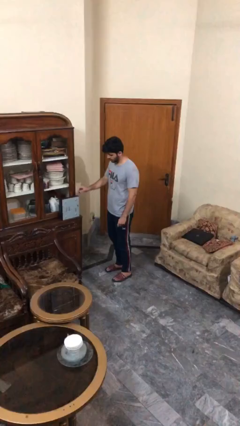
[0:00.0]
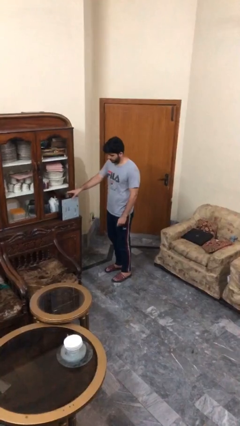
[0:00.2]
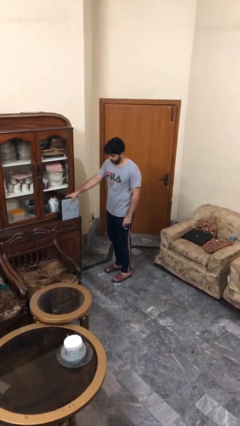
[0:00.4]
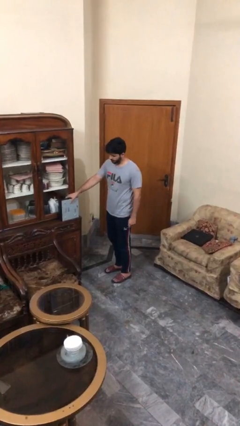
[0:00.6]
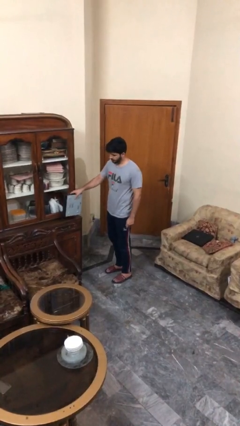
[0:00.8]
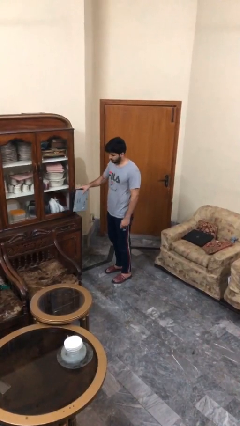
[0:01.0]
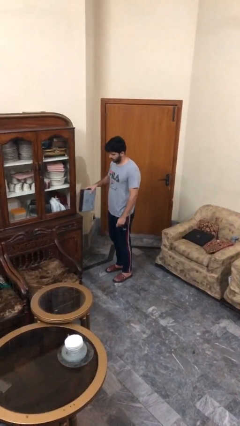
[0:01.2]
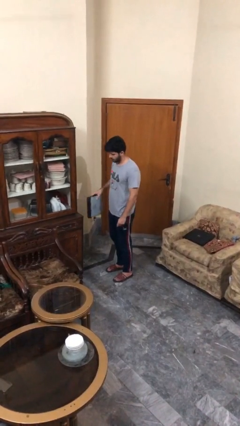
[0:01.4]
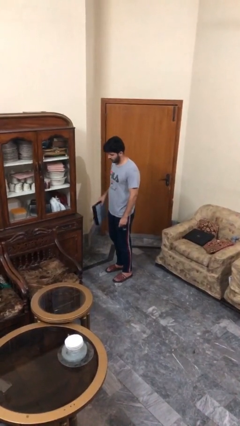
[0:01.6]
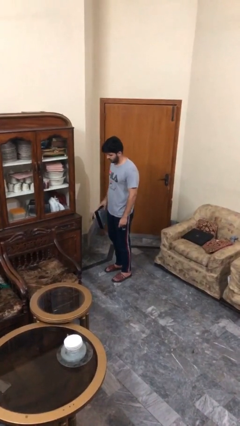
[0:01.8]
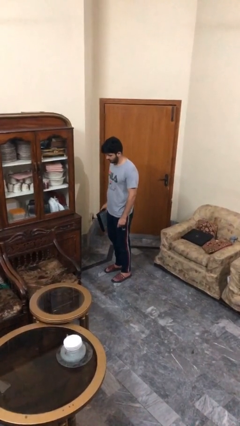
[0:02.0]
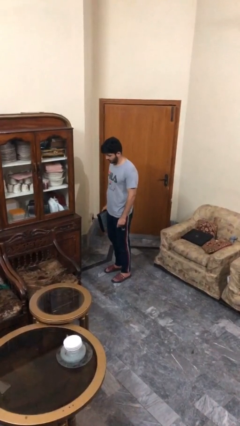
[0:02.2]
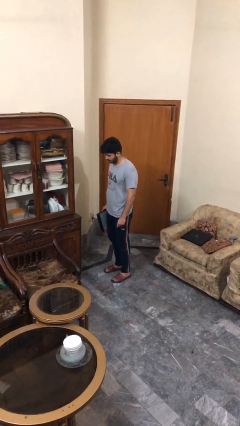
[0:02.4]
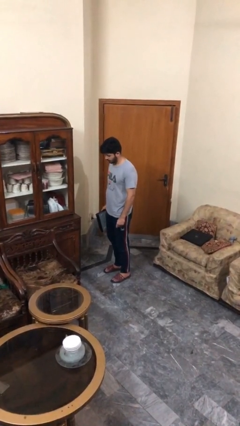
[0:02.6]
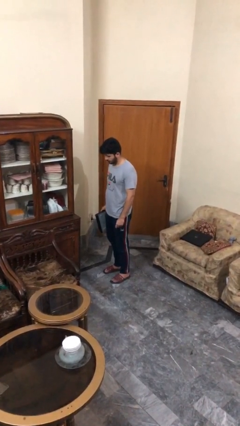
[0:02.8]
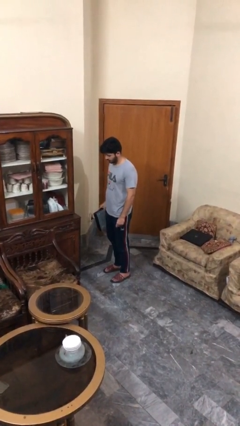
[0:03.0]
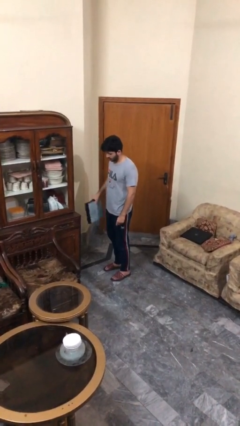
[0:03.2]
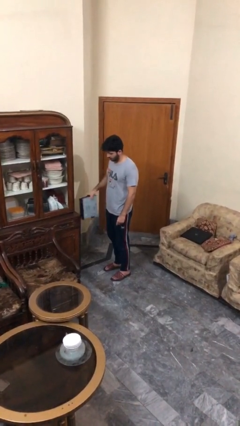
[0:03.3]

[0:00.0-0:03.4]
person picks up object from countertop

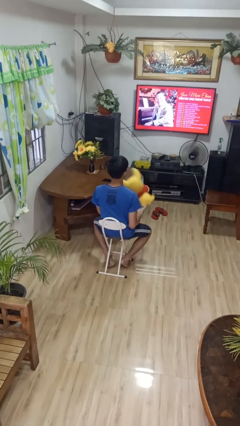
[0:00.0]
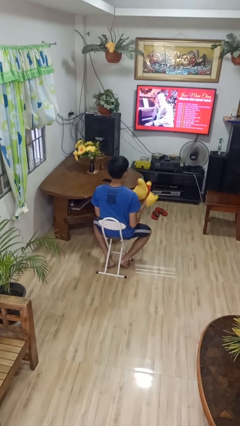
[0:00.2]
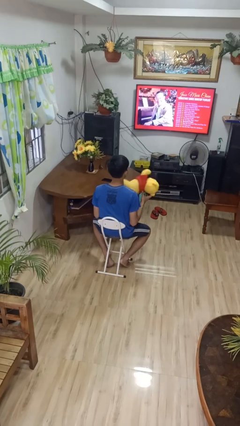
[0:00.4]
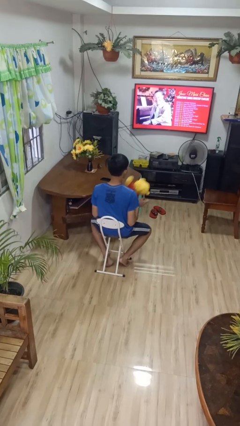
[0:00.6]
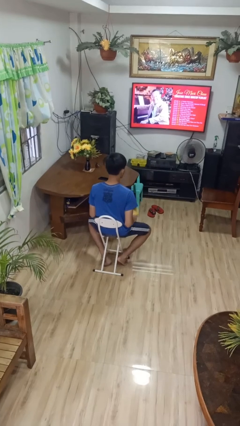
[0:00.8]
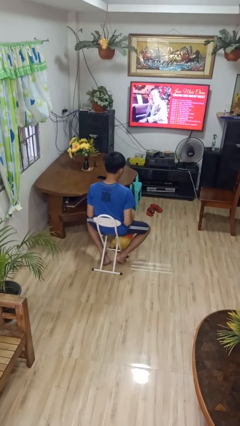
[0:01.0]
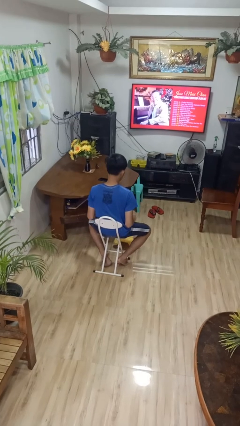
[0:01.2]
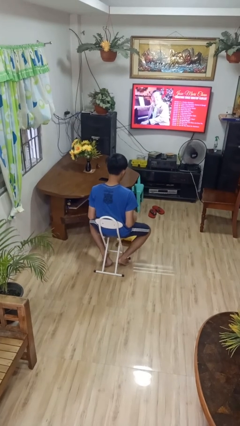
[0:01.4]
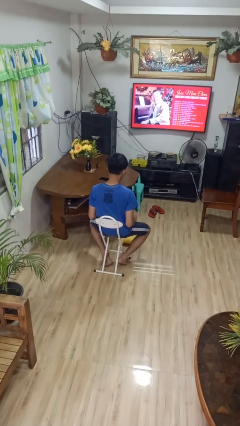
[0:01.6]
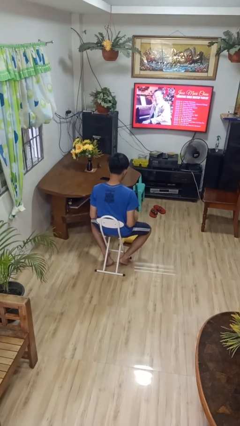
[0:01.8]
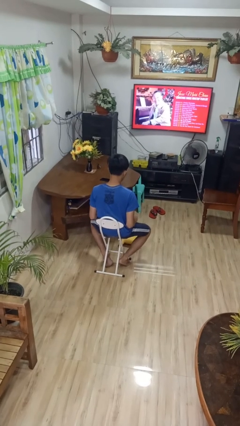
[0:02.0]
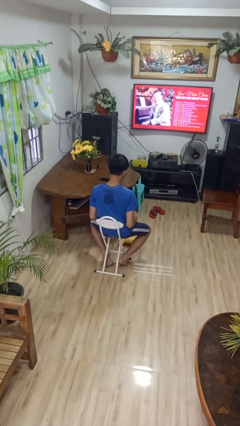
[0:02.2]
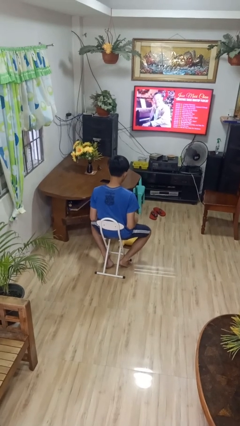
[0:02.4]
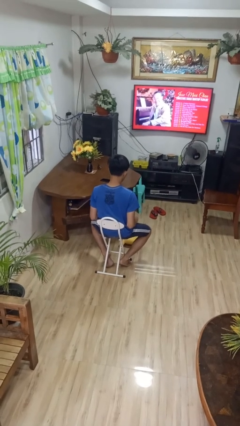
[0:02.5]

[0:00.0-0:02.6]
person drops object

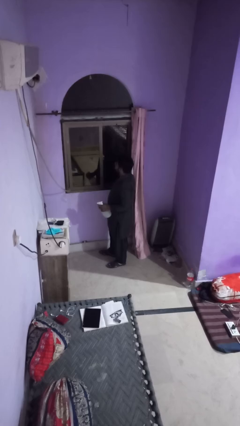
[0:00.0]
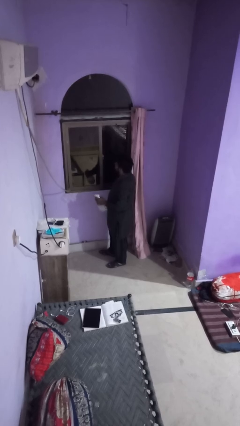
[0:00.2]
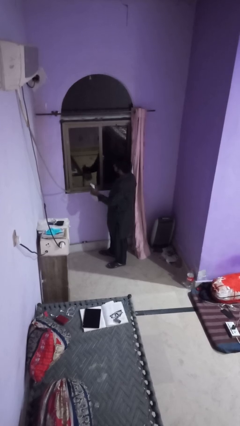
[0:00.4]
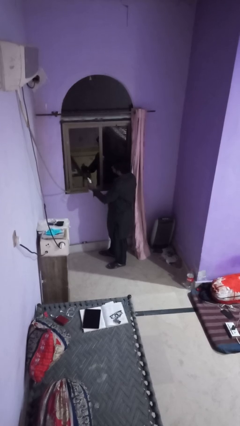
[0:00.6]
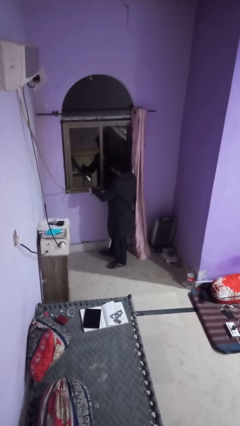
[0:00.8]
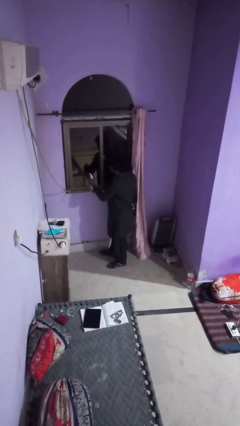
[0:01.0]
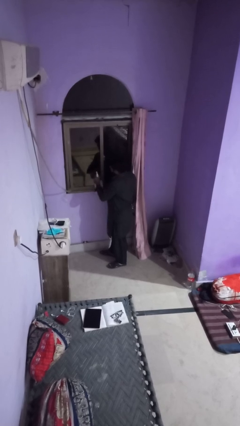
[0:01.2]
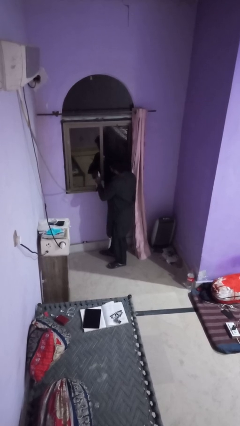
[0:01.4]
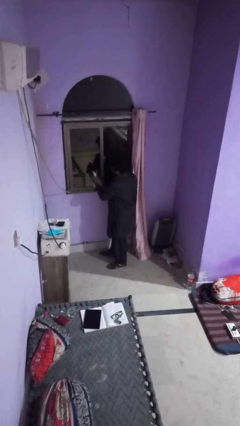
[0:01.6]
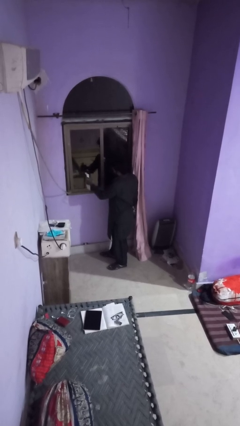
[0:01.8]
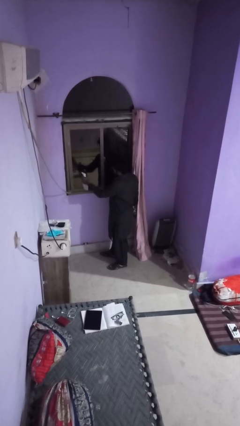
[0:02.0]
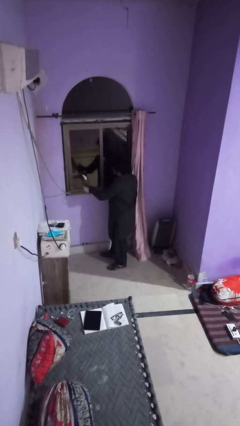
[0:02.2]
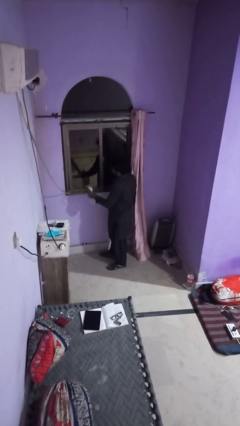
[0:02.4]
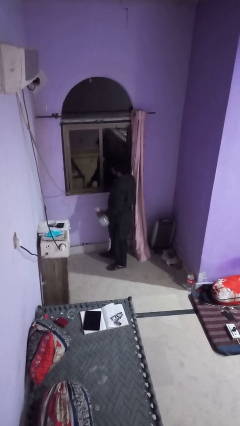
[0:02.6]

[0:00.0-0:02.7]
person sprays from bottle

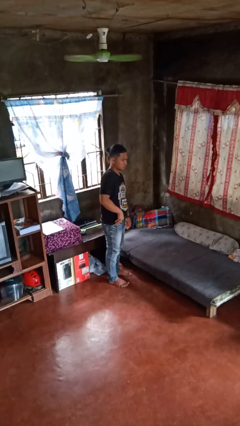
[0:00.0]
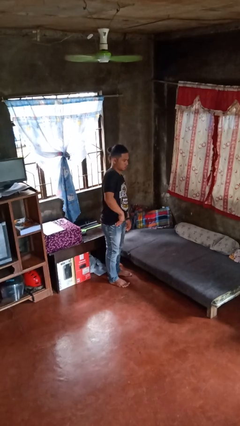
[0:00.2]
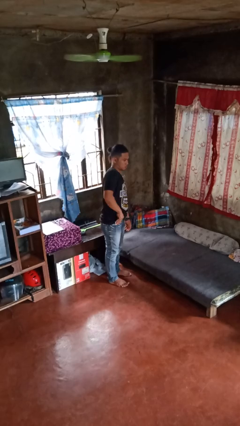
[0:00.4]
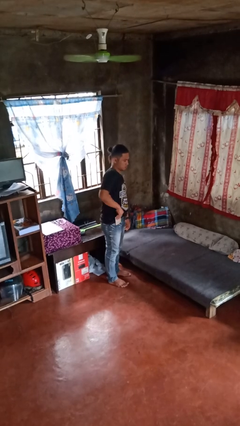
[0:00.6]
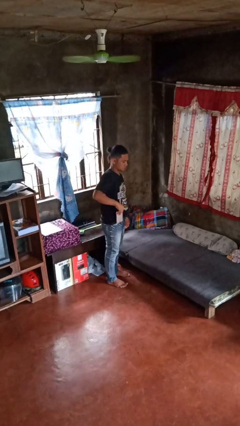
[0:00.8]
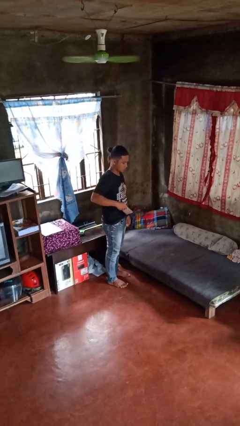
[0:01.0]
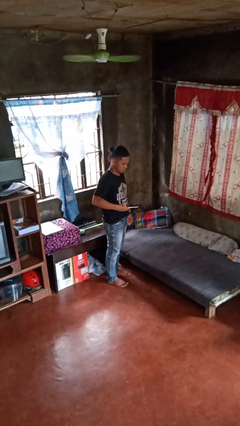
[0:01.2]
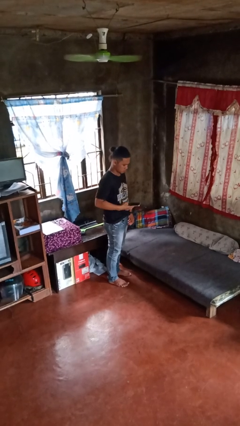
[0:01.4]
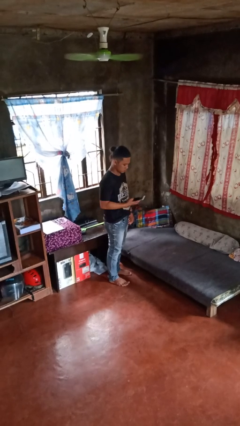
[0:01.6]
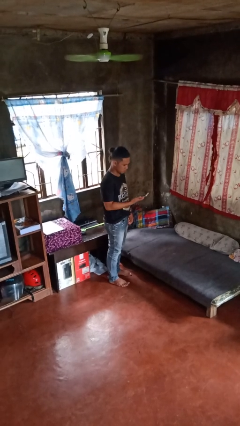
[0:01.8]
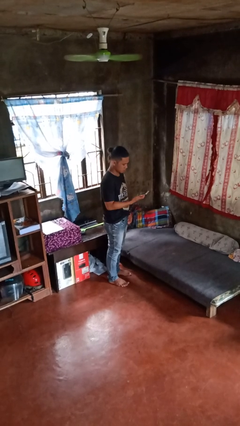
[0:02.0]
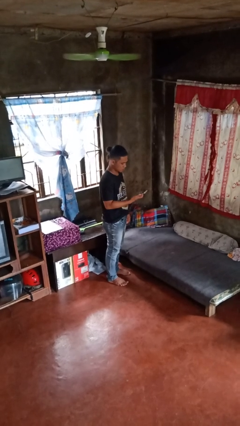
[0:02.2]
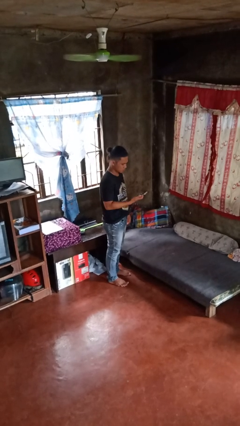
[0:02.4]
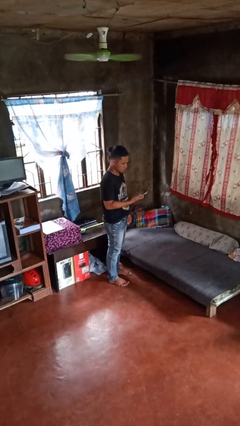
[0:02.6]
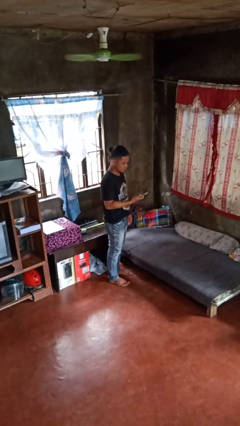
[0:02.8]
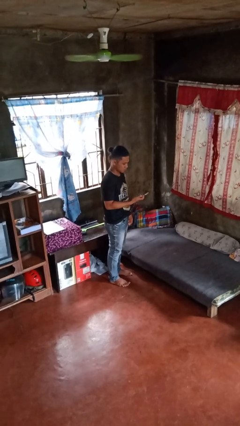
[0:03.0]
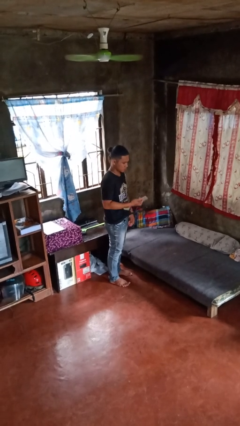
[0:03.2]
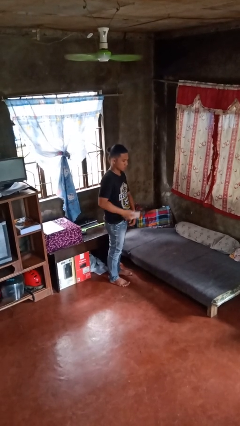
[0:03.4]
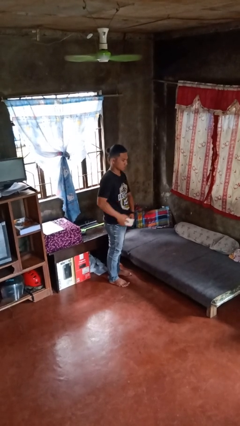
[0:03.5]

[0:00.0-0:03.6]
person takes phone from pocket

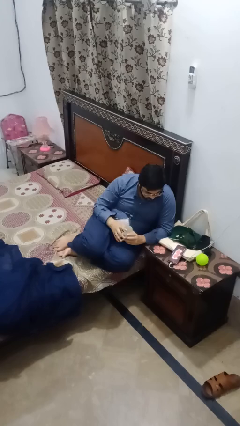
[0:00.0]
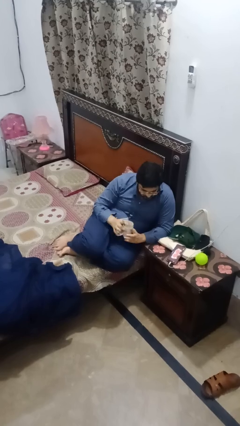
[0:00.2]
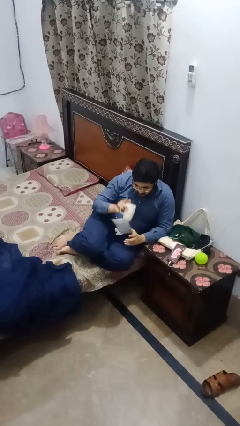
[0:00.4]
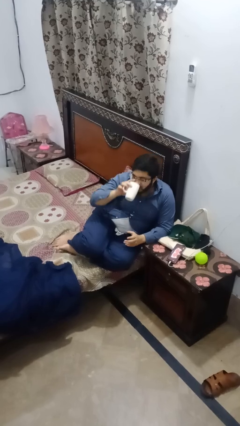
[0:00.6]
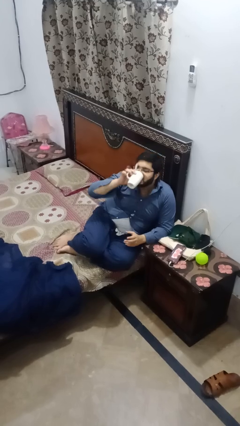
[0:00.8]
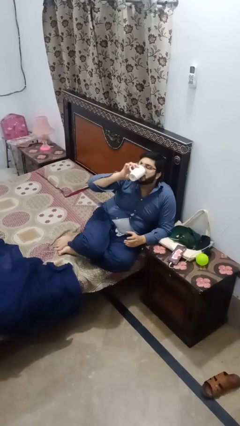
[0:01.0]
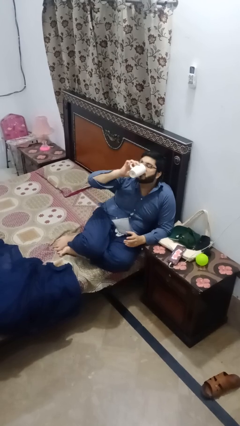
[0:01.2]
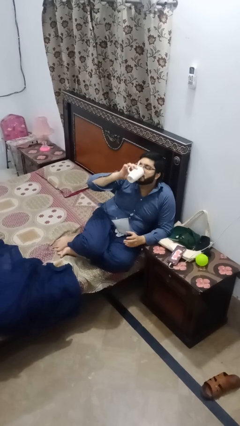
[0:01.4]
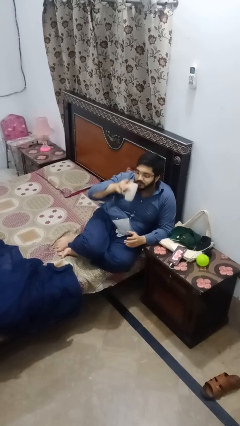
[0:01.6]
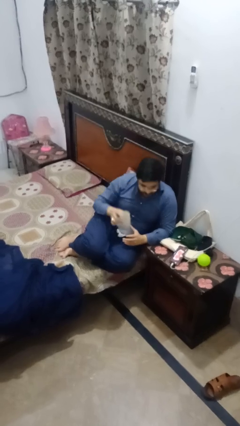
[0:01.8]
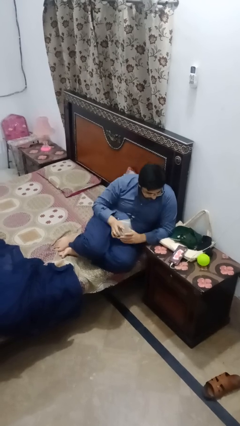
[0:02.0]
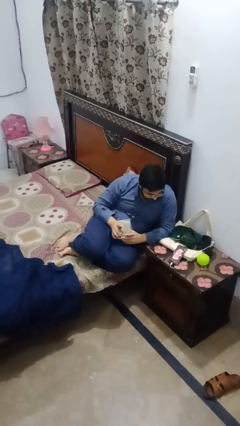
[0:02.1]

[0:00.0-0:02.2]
person drinks from mug

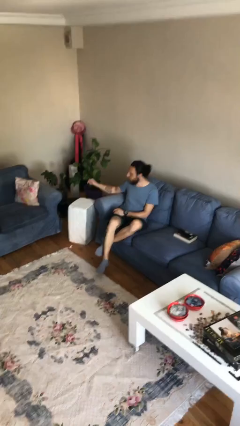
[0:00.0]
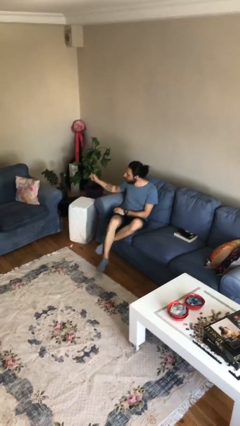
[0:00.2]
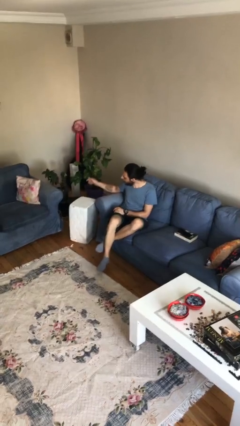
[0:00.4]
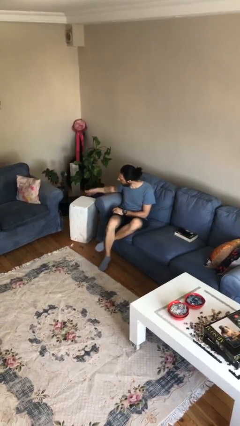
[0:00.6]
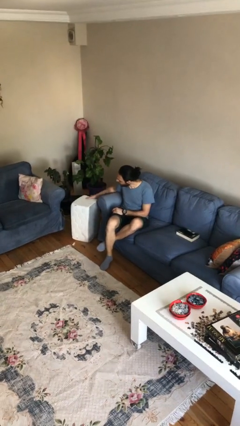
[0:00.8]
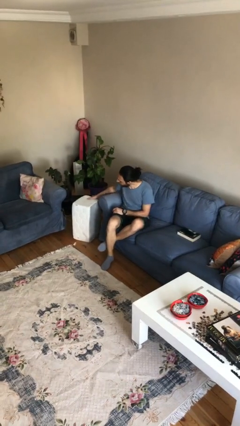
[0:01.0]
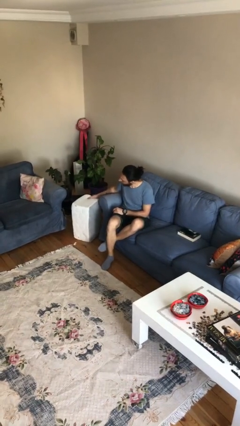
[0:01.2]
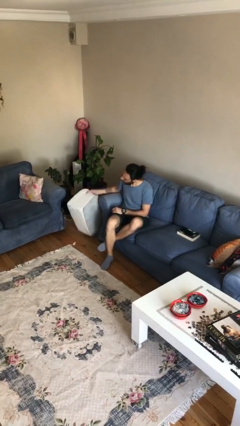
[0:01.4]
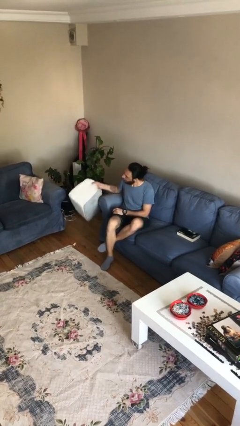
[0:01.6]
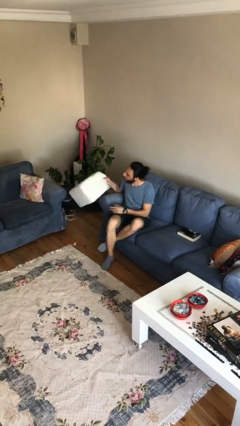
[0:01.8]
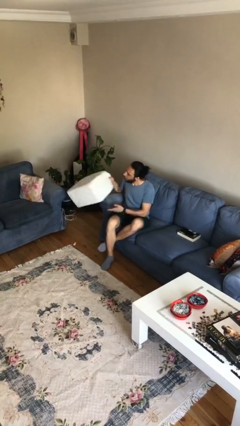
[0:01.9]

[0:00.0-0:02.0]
person picks up object from floor

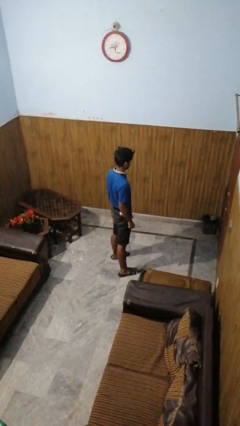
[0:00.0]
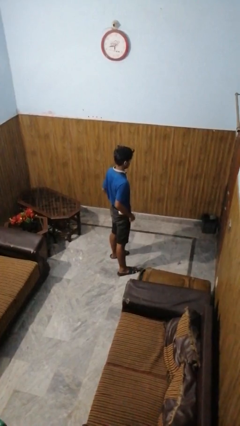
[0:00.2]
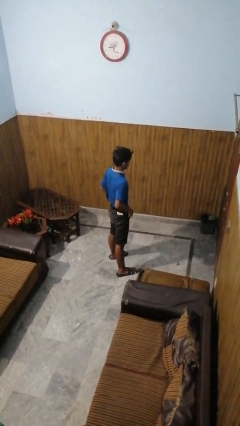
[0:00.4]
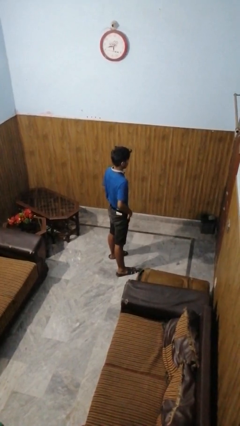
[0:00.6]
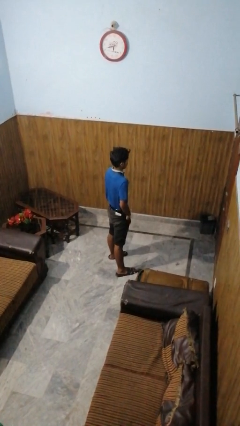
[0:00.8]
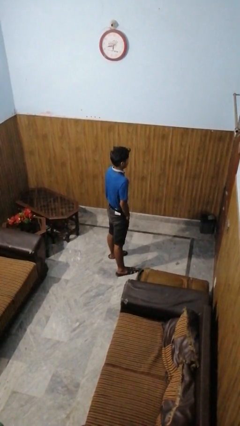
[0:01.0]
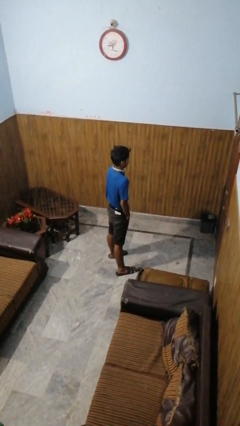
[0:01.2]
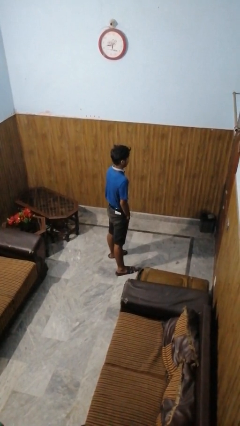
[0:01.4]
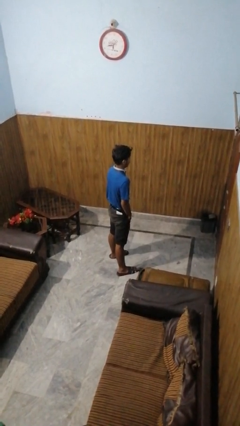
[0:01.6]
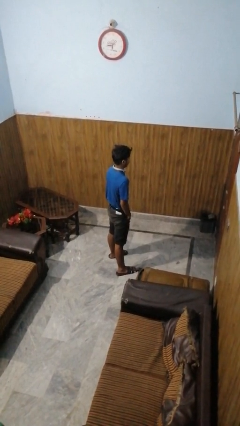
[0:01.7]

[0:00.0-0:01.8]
person puts hands in back pockets
